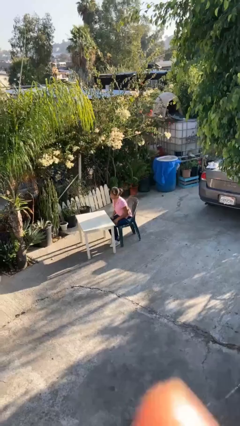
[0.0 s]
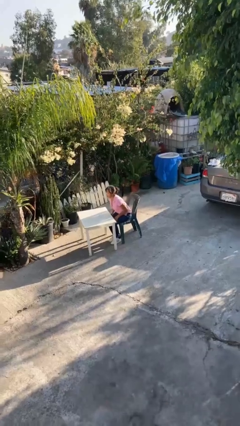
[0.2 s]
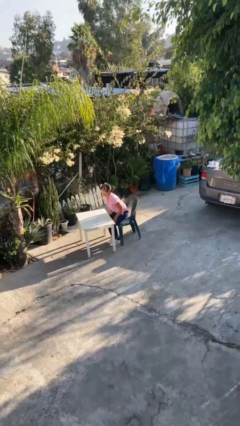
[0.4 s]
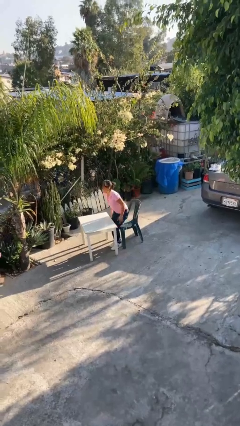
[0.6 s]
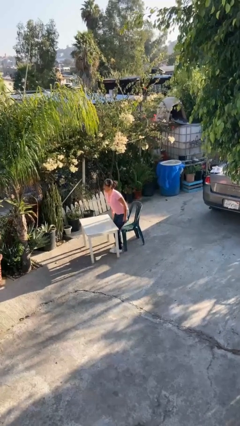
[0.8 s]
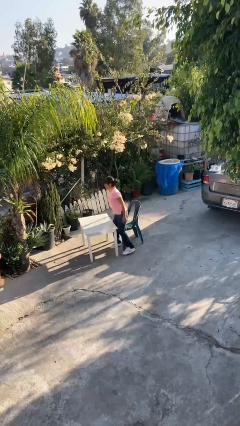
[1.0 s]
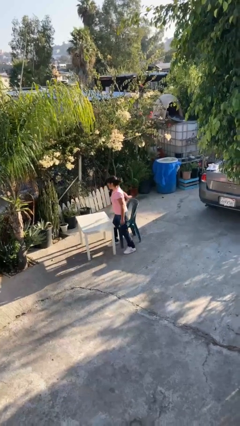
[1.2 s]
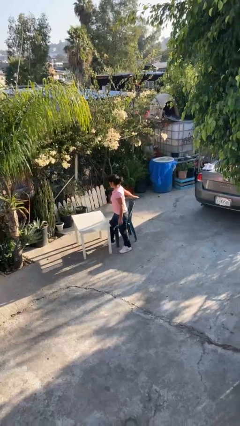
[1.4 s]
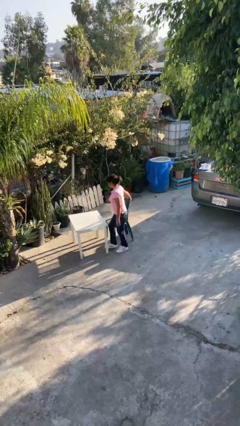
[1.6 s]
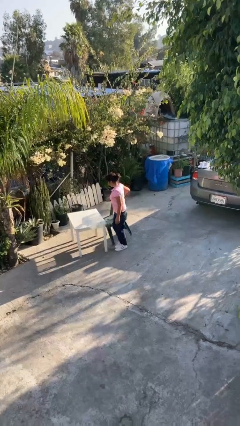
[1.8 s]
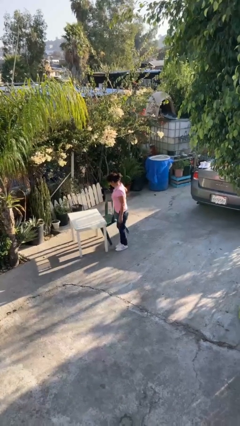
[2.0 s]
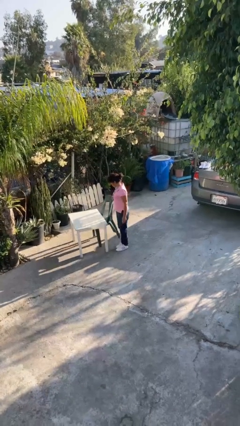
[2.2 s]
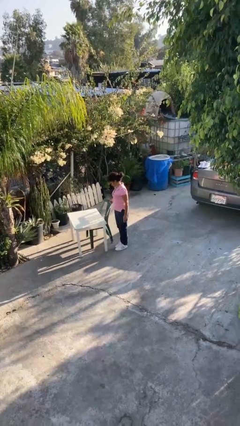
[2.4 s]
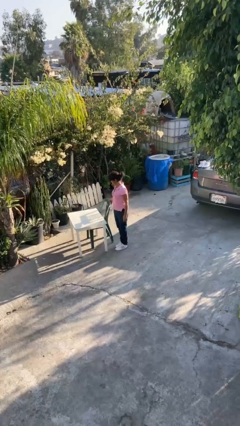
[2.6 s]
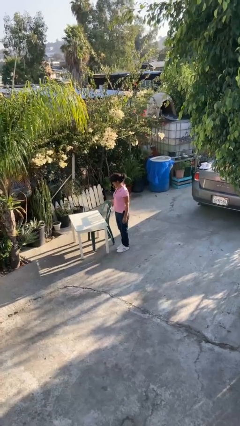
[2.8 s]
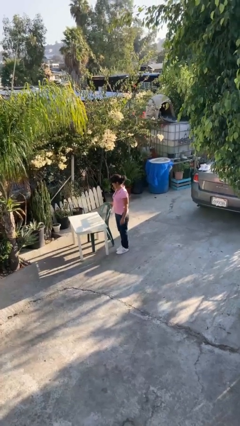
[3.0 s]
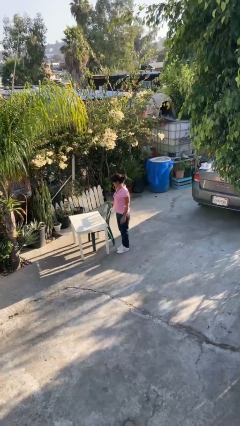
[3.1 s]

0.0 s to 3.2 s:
person stands up

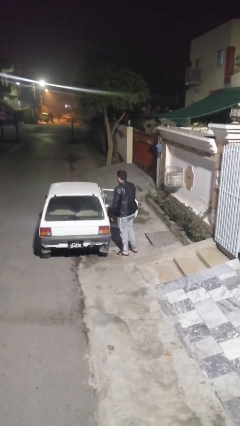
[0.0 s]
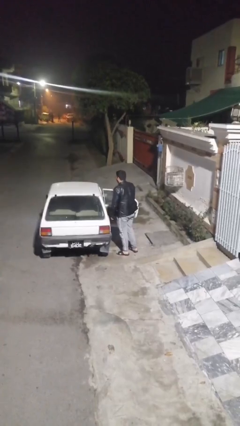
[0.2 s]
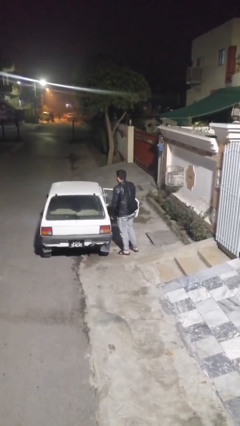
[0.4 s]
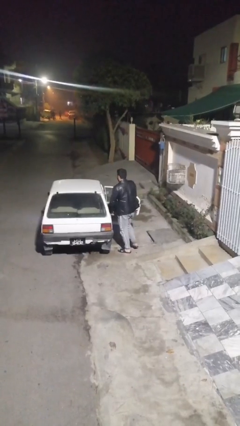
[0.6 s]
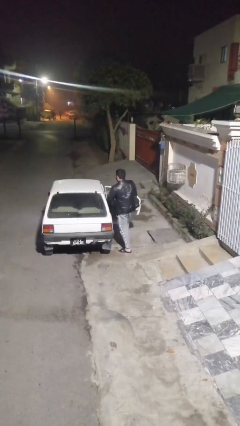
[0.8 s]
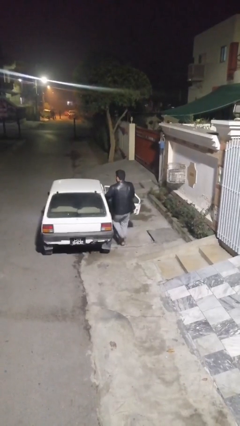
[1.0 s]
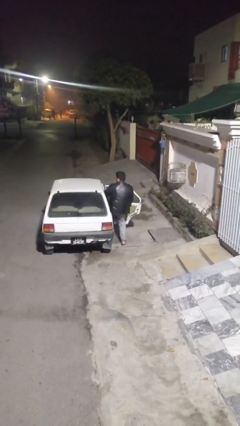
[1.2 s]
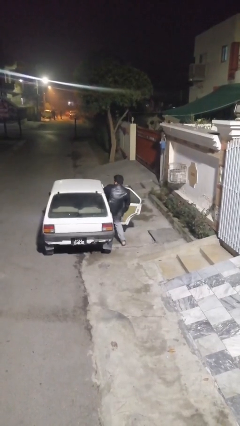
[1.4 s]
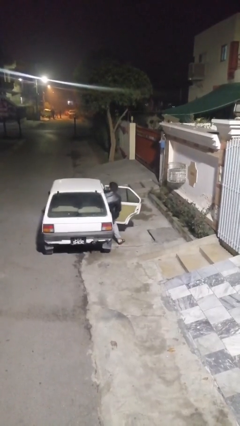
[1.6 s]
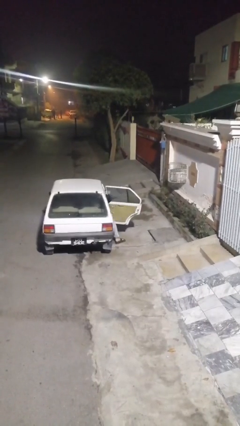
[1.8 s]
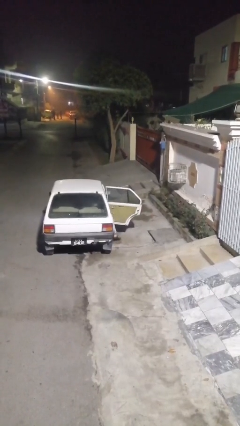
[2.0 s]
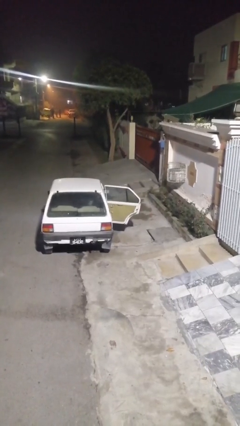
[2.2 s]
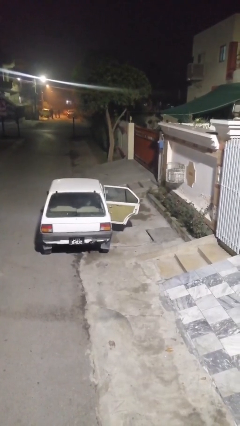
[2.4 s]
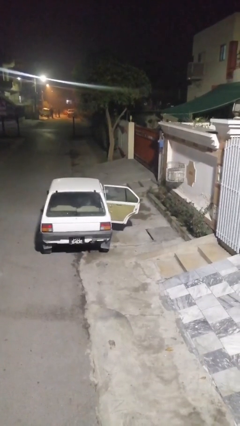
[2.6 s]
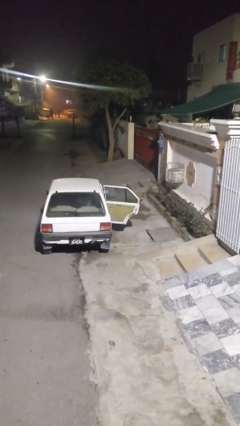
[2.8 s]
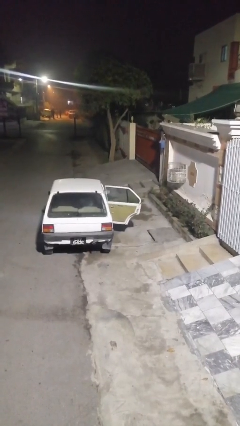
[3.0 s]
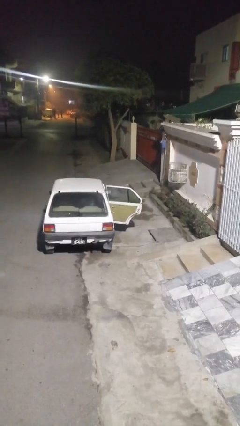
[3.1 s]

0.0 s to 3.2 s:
person enters car

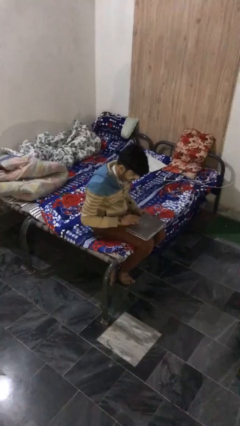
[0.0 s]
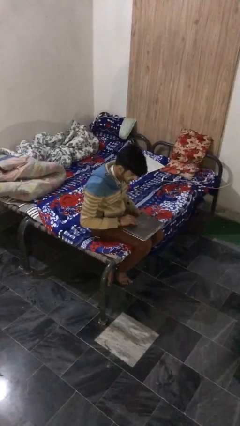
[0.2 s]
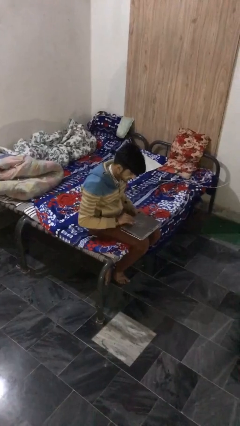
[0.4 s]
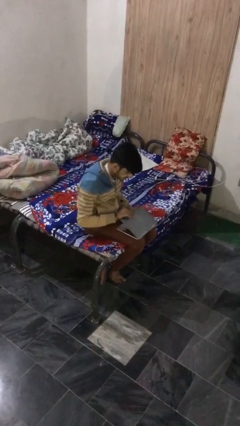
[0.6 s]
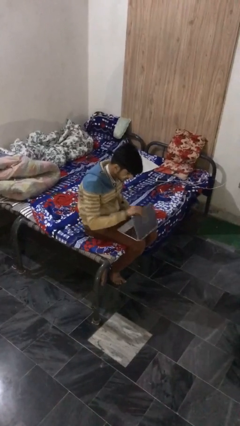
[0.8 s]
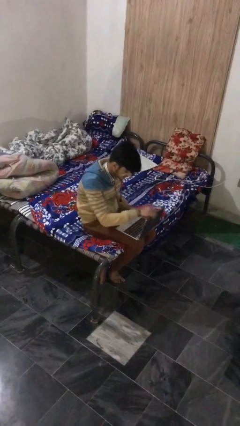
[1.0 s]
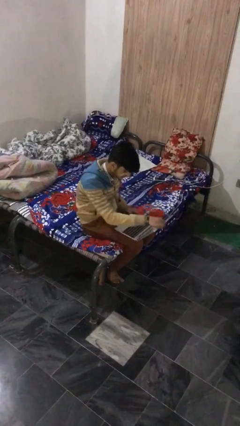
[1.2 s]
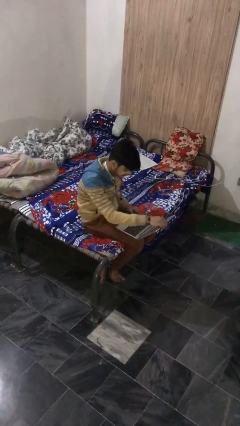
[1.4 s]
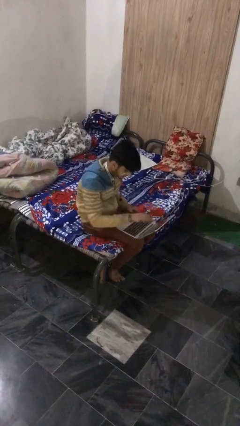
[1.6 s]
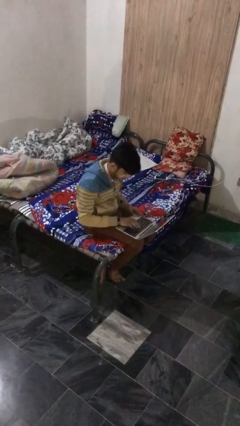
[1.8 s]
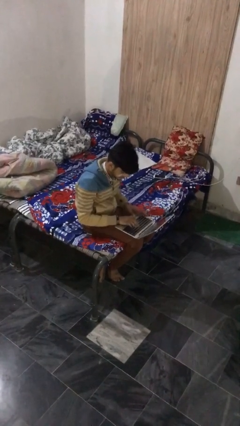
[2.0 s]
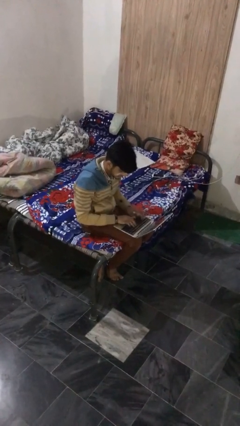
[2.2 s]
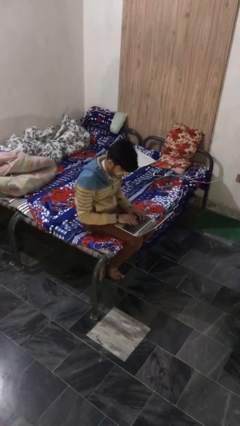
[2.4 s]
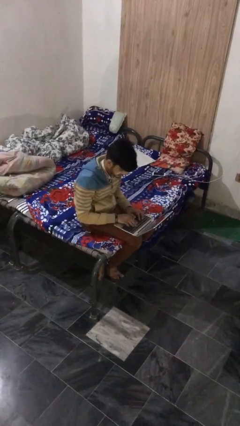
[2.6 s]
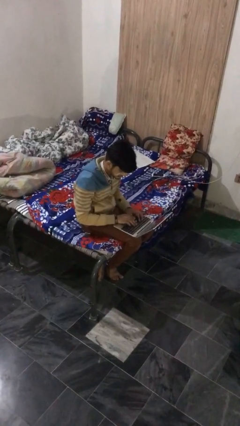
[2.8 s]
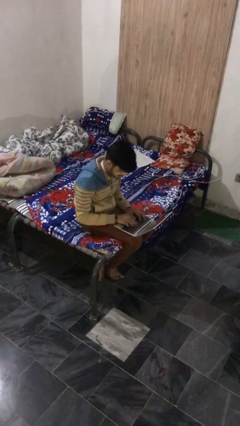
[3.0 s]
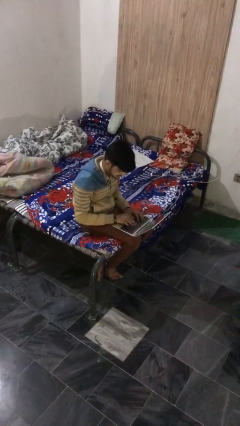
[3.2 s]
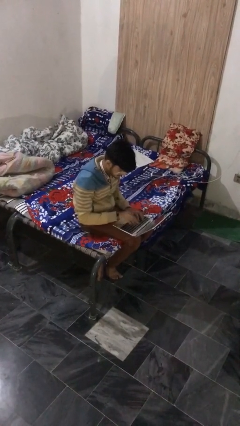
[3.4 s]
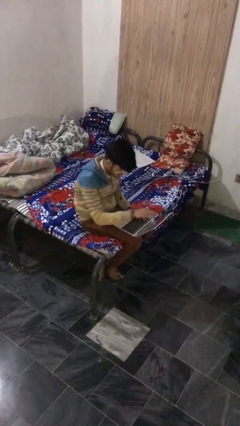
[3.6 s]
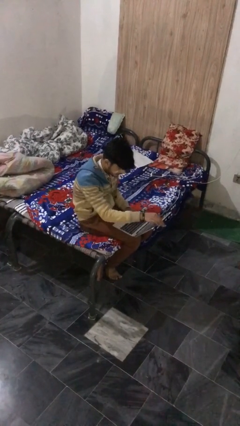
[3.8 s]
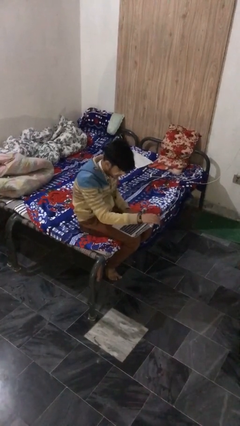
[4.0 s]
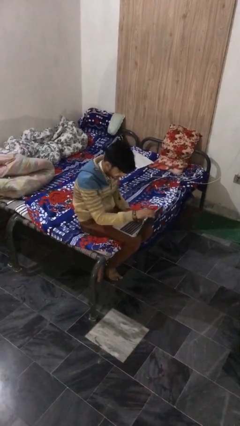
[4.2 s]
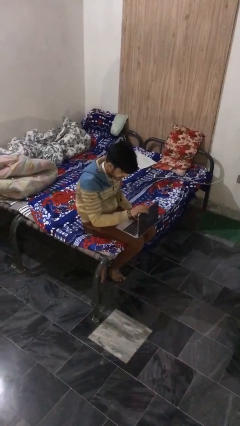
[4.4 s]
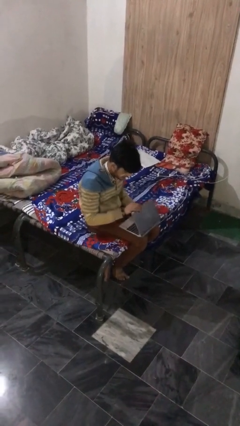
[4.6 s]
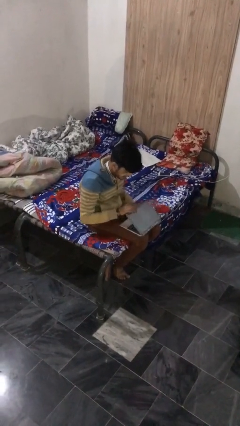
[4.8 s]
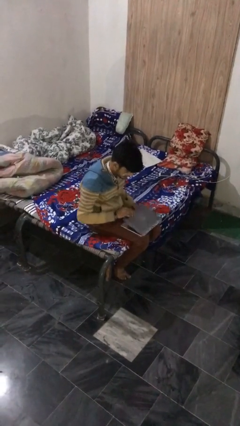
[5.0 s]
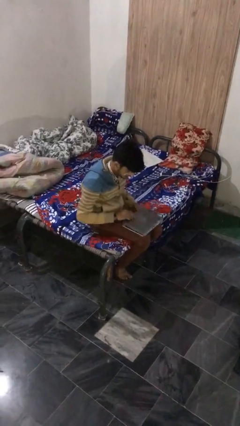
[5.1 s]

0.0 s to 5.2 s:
person interacts with laptop

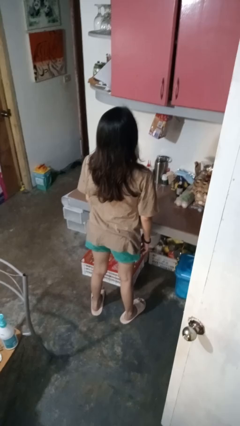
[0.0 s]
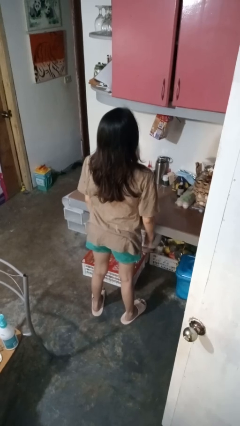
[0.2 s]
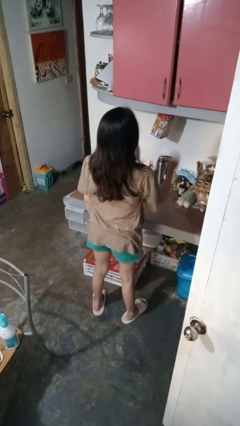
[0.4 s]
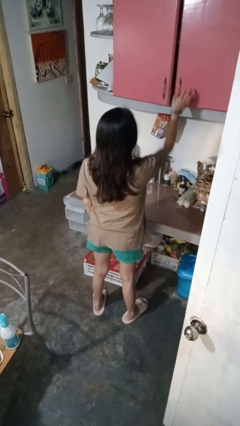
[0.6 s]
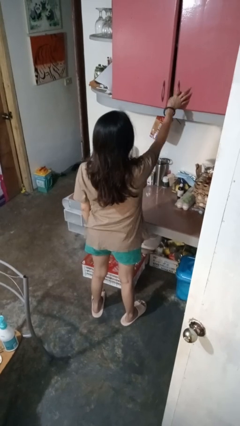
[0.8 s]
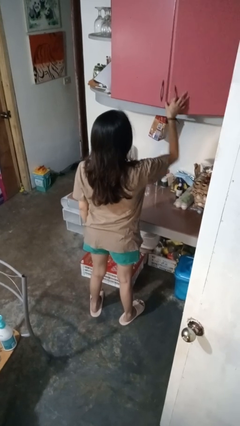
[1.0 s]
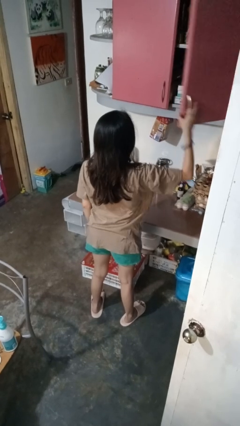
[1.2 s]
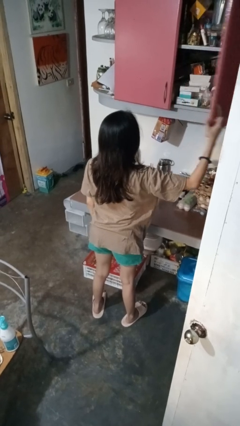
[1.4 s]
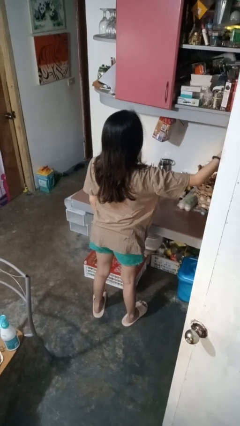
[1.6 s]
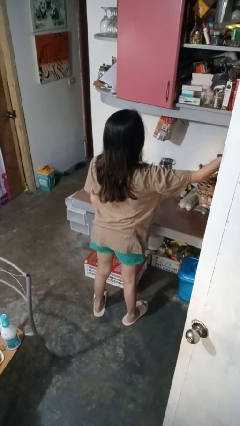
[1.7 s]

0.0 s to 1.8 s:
person opens cabinet

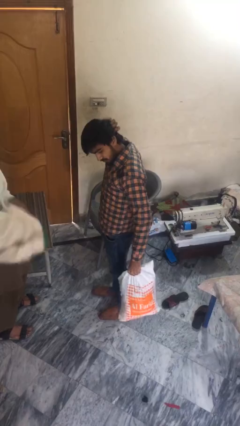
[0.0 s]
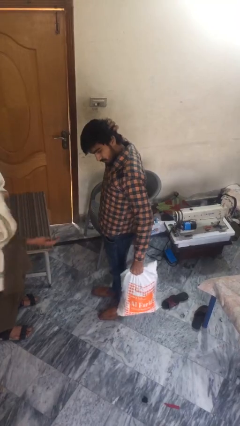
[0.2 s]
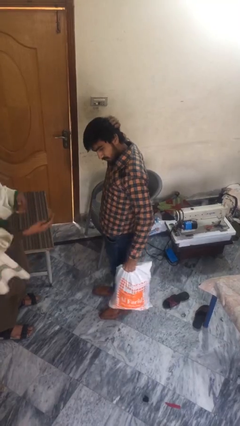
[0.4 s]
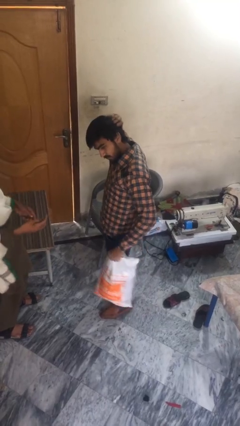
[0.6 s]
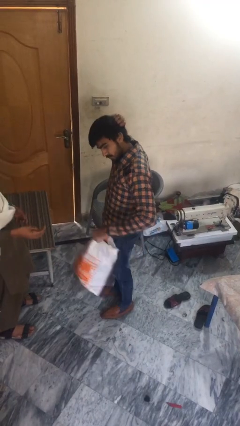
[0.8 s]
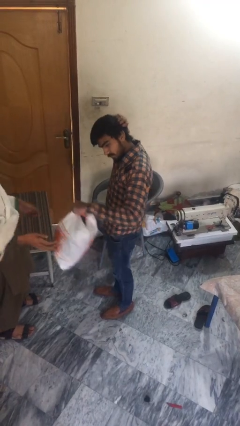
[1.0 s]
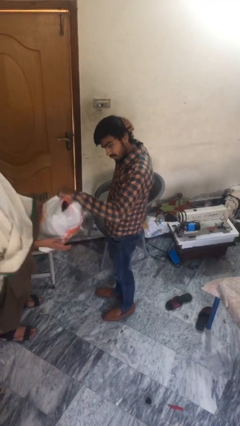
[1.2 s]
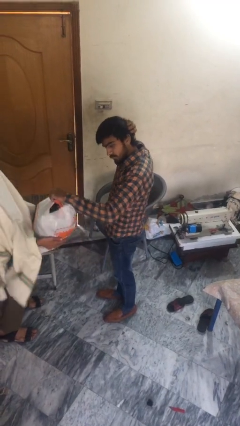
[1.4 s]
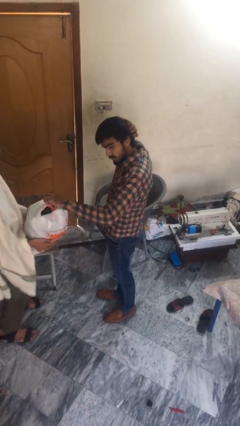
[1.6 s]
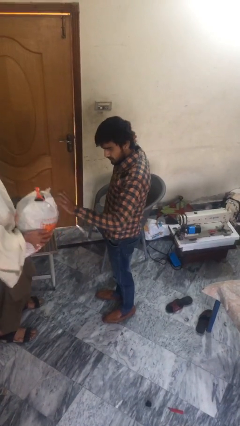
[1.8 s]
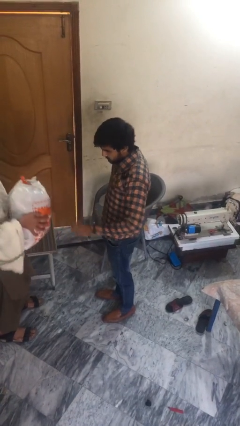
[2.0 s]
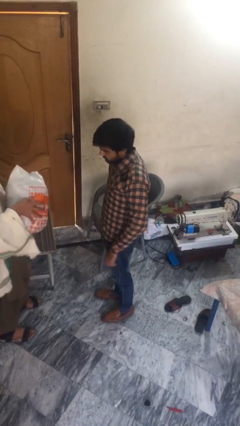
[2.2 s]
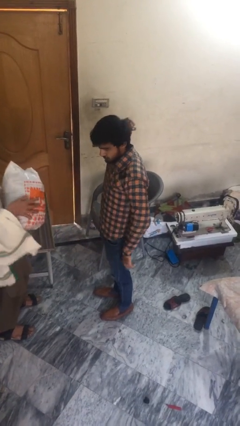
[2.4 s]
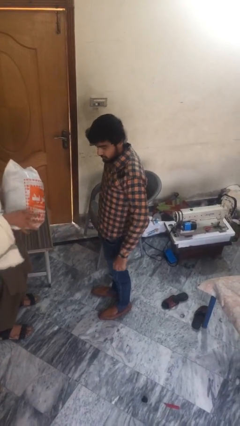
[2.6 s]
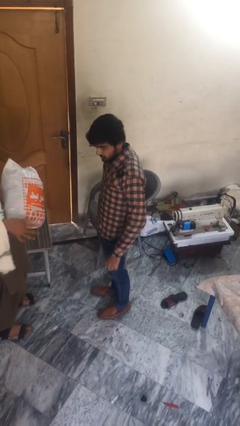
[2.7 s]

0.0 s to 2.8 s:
person transfers object to person

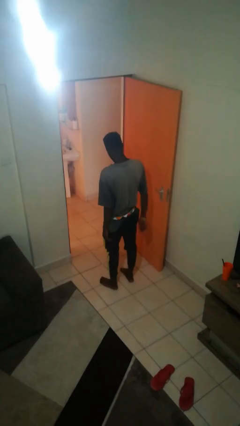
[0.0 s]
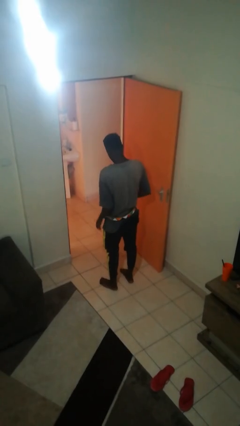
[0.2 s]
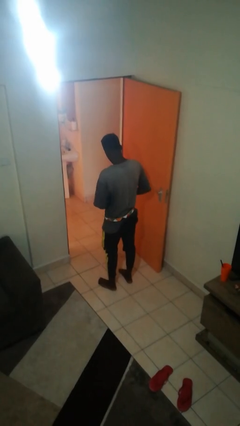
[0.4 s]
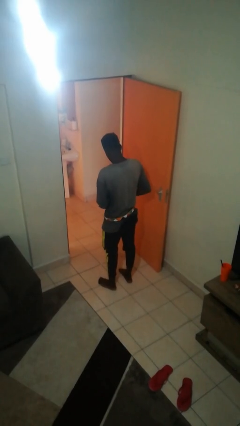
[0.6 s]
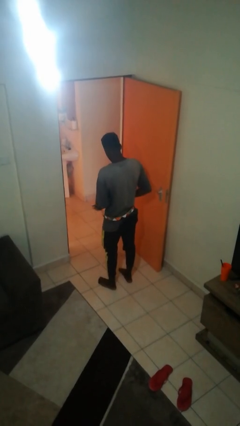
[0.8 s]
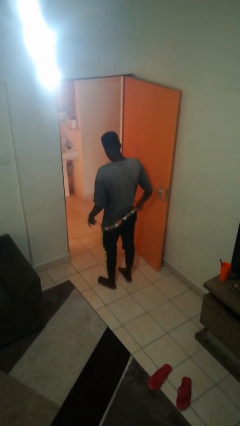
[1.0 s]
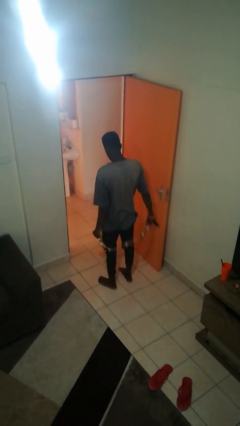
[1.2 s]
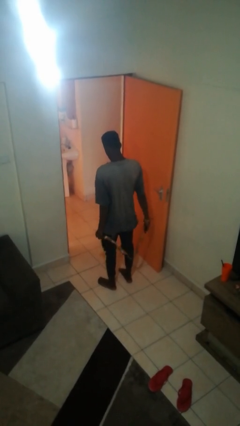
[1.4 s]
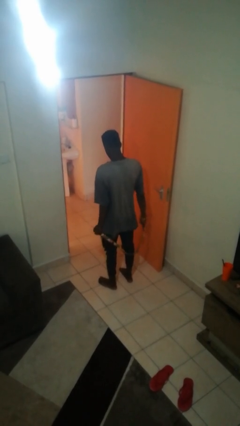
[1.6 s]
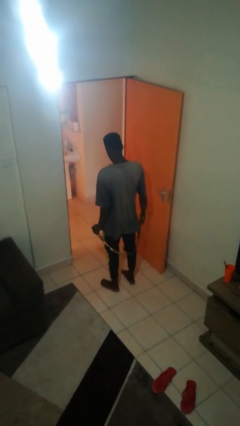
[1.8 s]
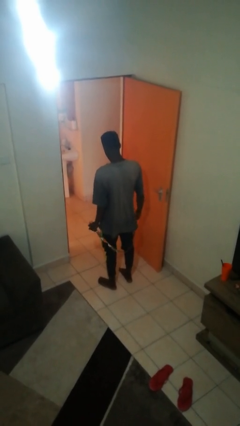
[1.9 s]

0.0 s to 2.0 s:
person takes off belt
